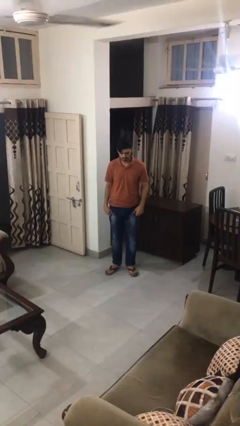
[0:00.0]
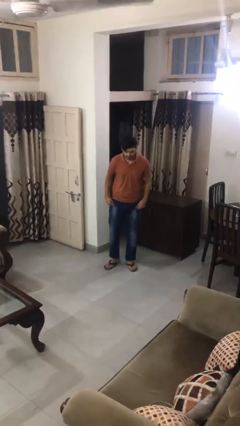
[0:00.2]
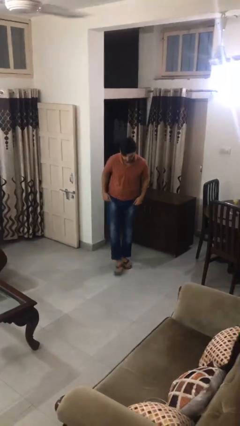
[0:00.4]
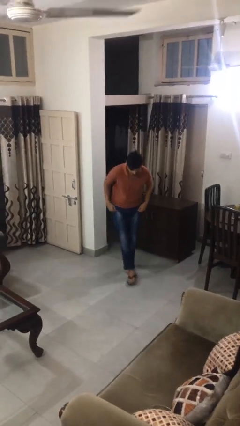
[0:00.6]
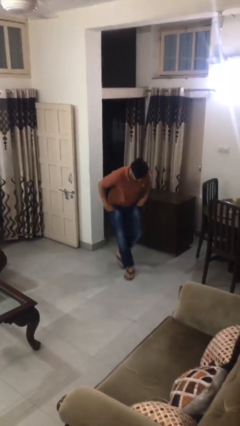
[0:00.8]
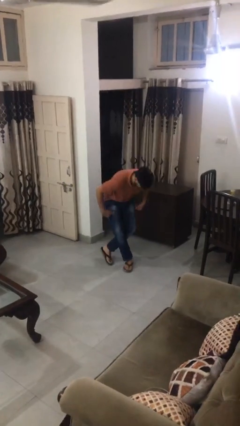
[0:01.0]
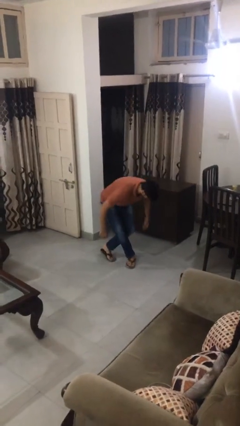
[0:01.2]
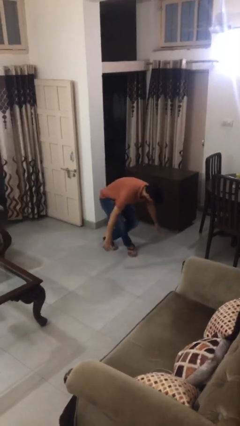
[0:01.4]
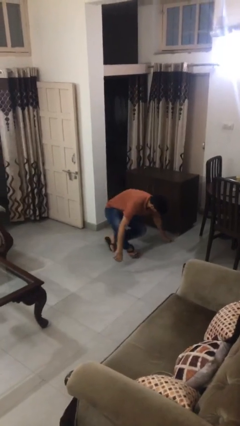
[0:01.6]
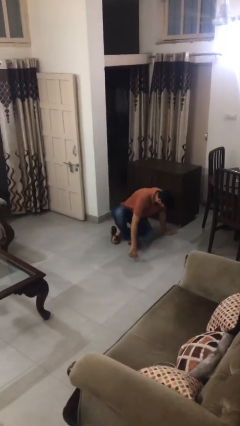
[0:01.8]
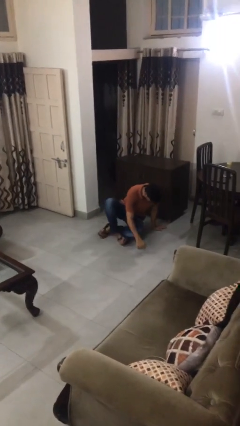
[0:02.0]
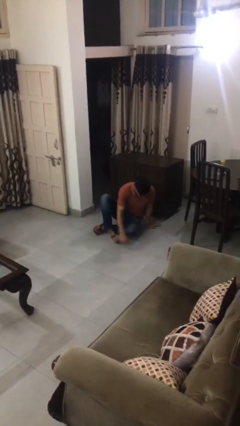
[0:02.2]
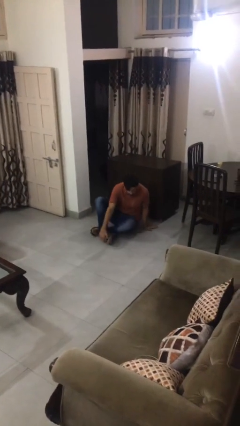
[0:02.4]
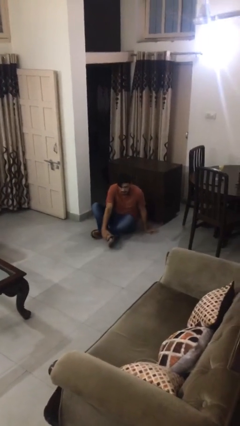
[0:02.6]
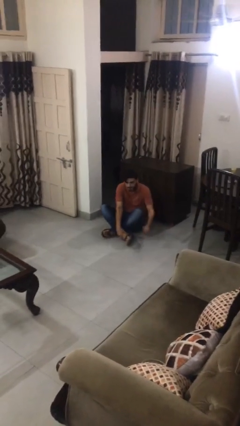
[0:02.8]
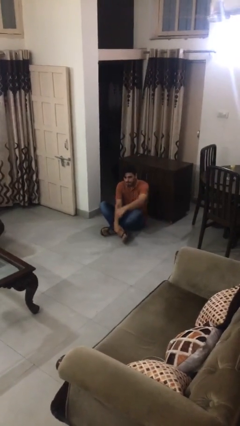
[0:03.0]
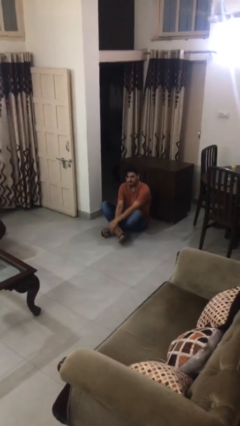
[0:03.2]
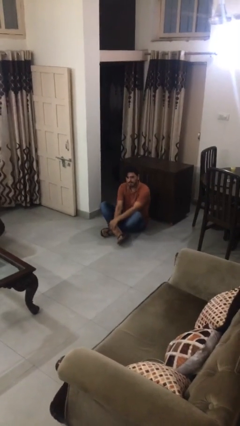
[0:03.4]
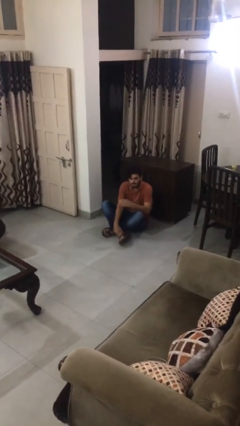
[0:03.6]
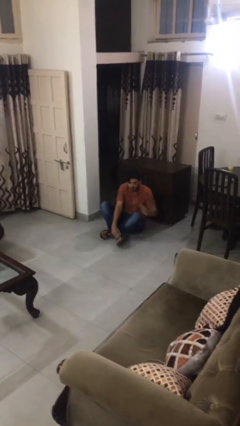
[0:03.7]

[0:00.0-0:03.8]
person sits crisscross

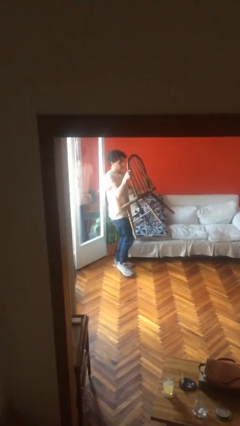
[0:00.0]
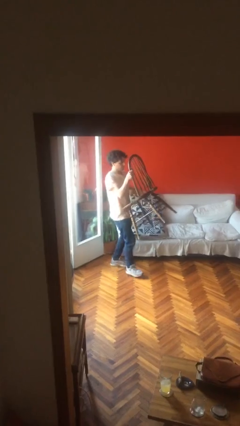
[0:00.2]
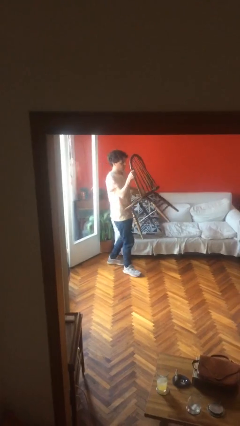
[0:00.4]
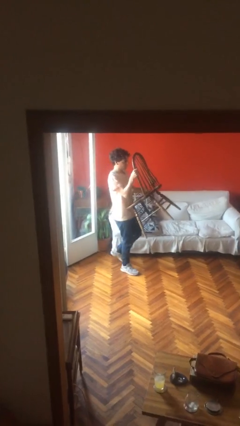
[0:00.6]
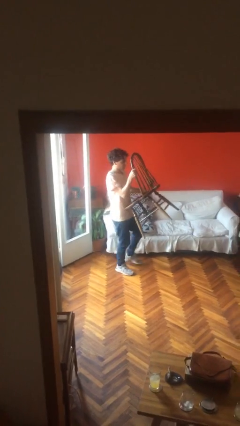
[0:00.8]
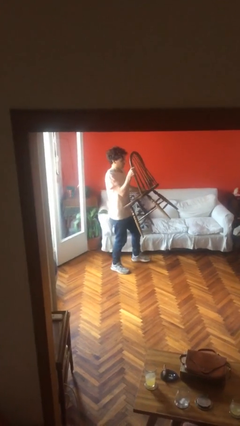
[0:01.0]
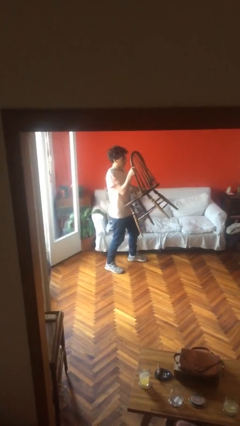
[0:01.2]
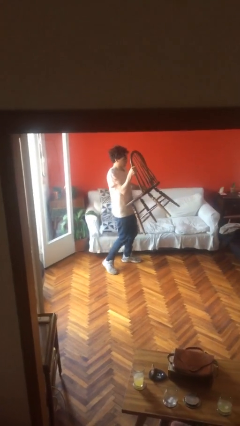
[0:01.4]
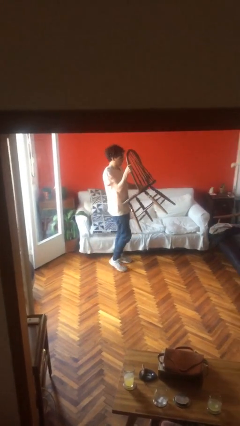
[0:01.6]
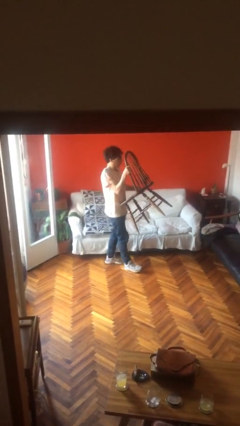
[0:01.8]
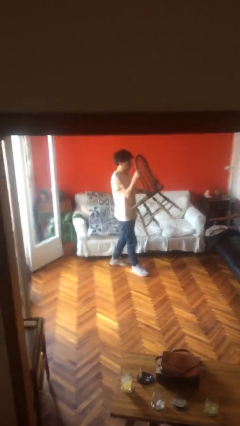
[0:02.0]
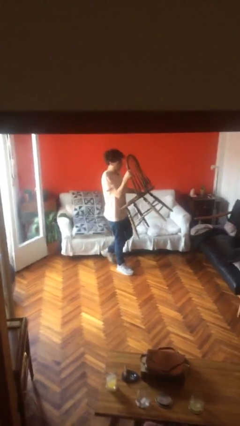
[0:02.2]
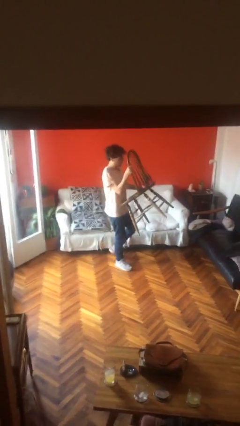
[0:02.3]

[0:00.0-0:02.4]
person carries heavy object

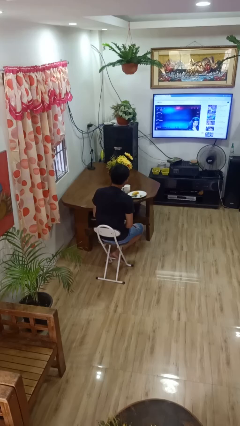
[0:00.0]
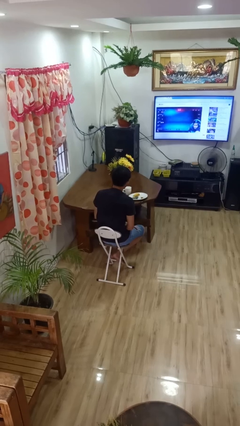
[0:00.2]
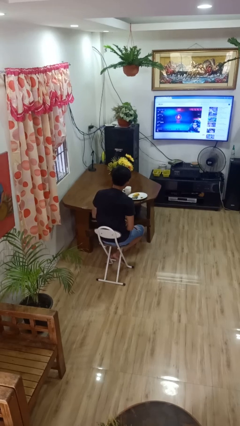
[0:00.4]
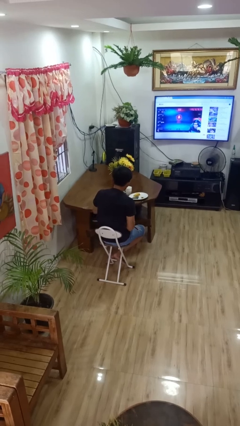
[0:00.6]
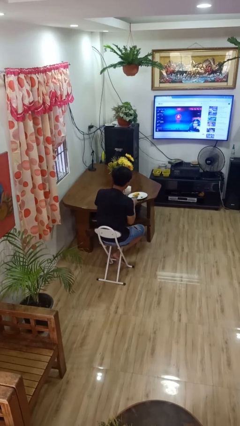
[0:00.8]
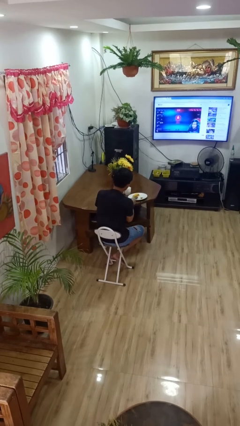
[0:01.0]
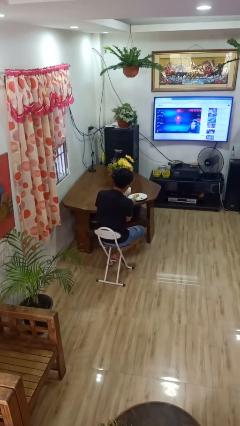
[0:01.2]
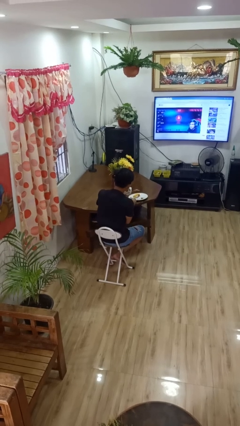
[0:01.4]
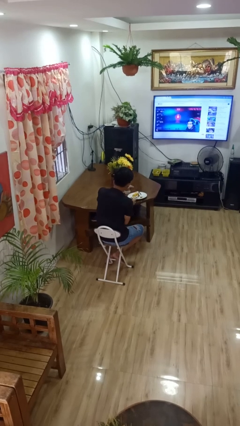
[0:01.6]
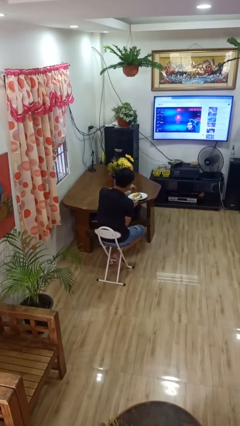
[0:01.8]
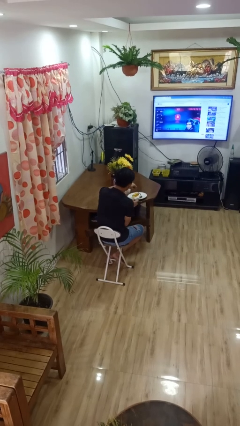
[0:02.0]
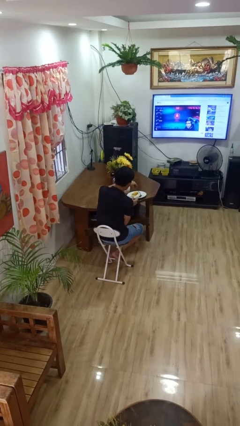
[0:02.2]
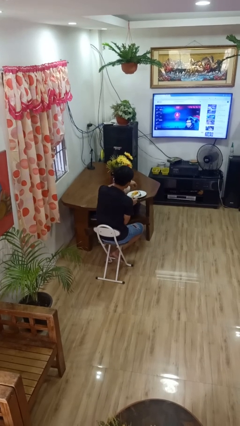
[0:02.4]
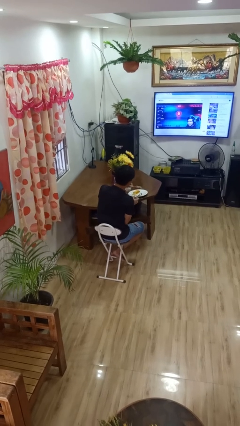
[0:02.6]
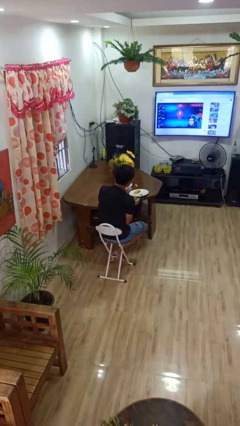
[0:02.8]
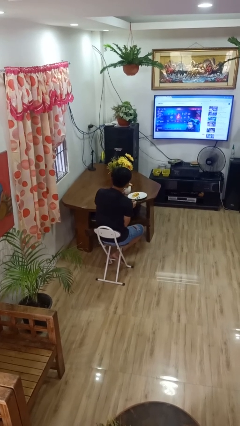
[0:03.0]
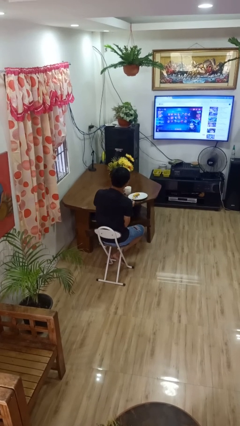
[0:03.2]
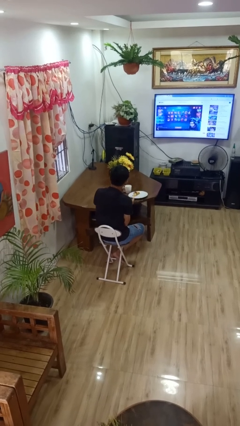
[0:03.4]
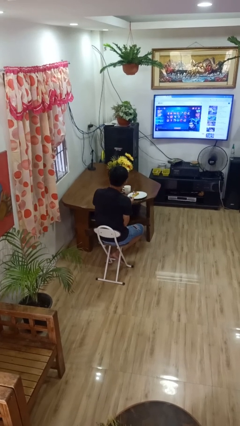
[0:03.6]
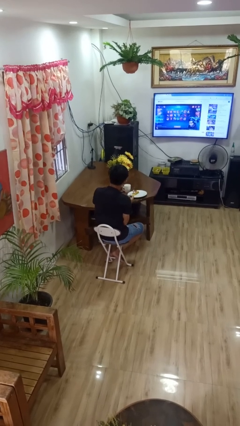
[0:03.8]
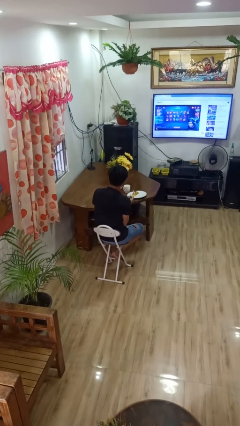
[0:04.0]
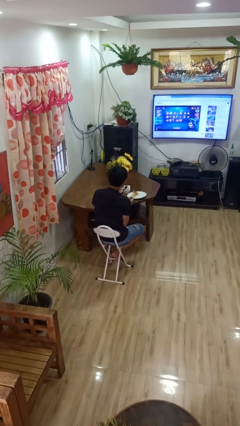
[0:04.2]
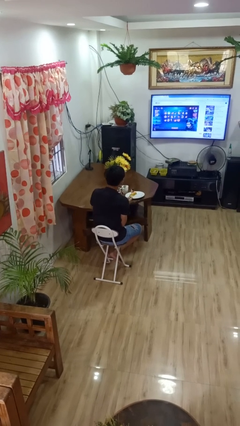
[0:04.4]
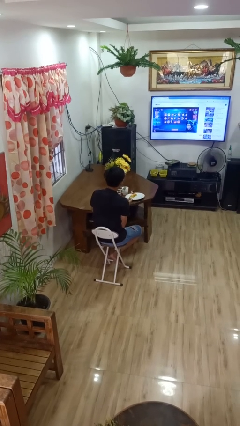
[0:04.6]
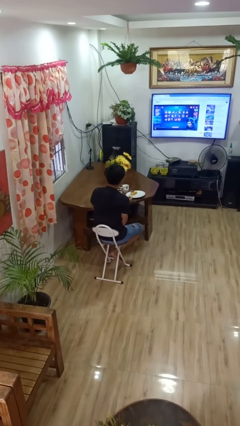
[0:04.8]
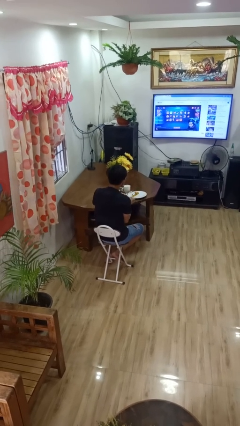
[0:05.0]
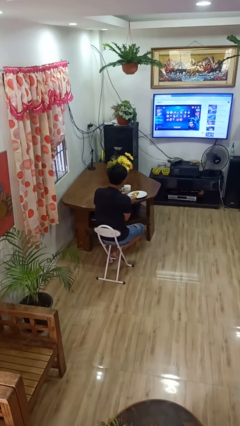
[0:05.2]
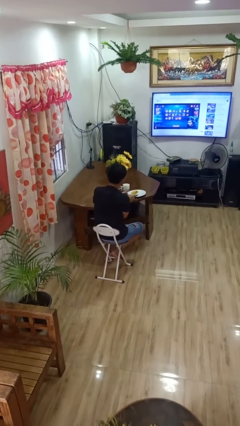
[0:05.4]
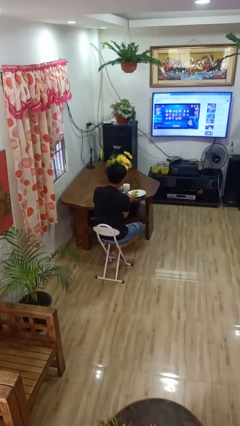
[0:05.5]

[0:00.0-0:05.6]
person eats with utensil

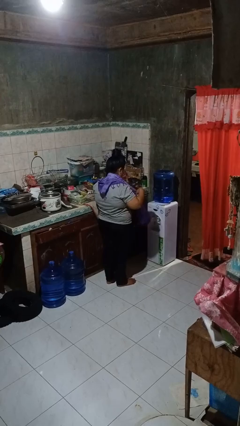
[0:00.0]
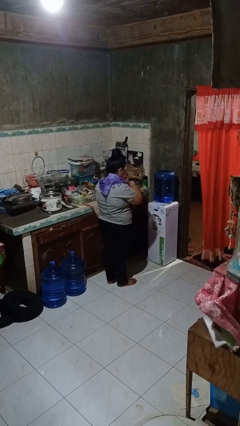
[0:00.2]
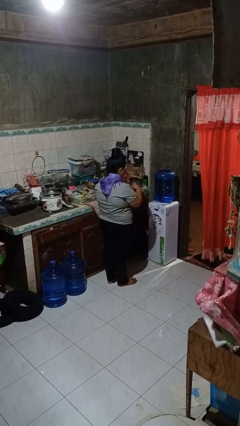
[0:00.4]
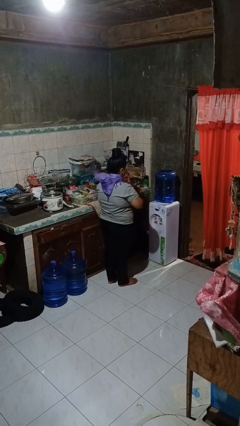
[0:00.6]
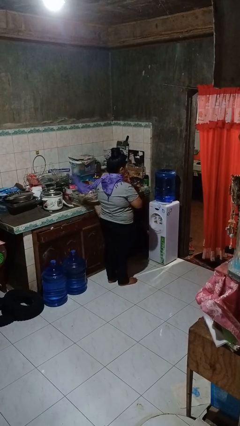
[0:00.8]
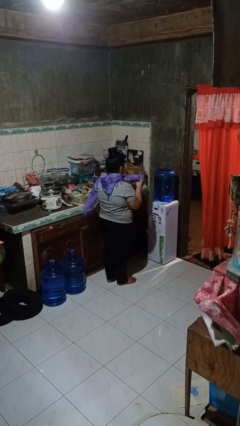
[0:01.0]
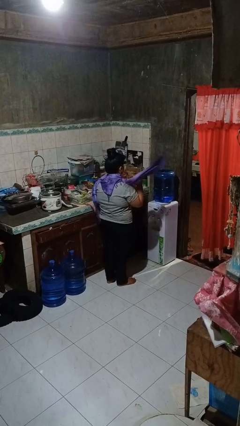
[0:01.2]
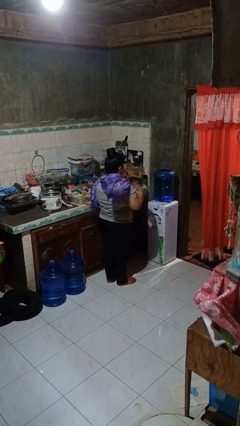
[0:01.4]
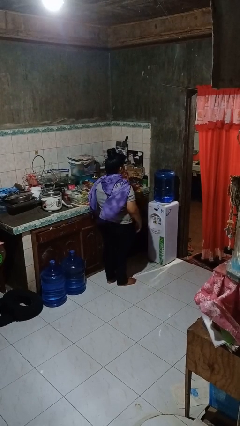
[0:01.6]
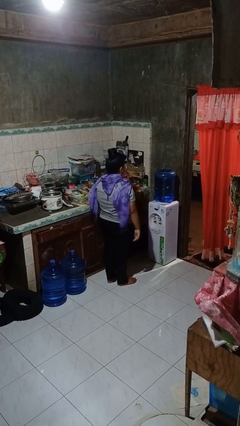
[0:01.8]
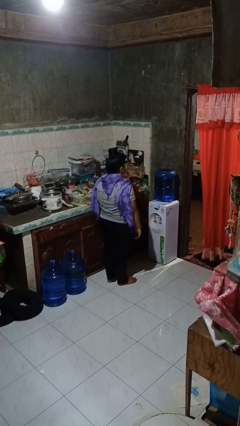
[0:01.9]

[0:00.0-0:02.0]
person puts on scarf

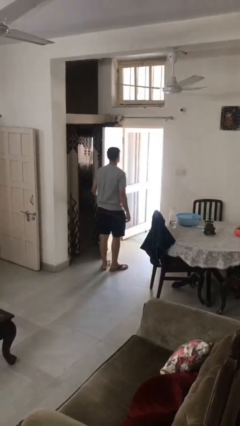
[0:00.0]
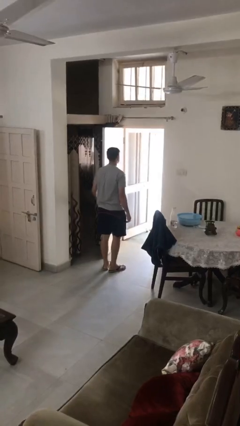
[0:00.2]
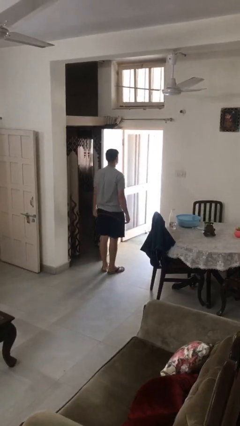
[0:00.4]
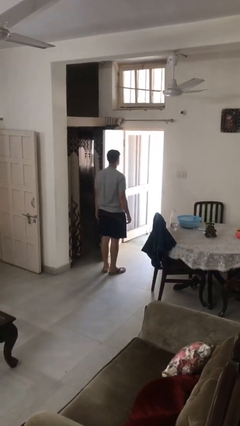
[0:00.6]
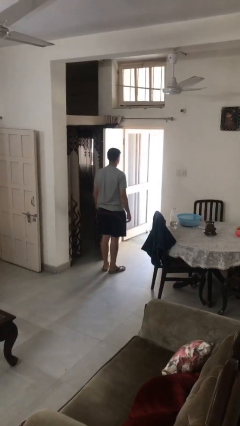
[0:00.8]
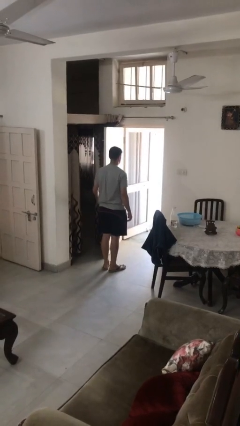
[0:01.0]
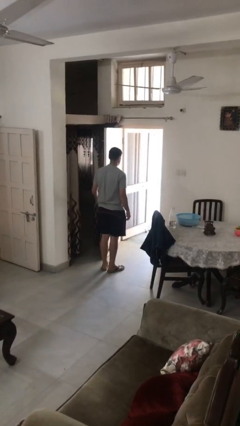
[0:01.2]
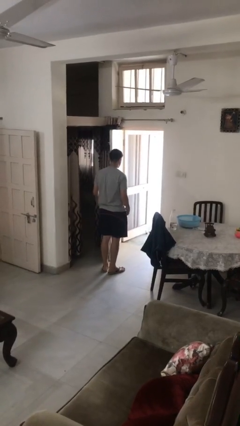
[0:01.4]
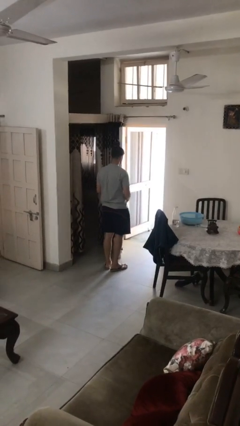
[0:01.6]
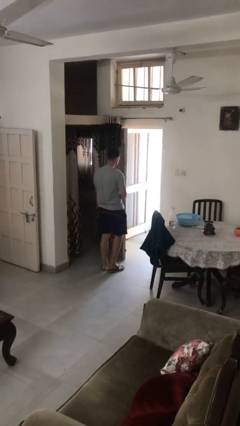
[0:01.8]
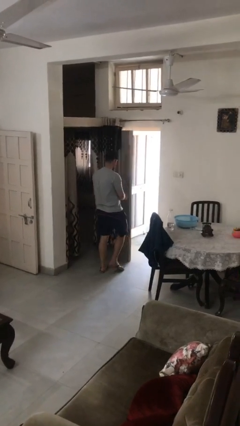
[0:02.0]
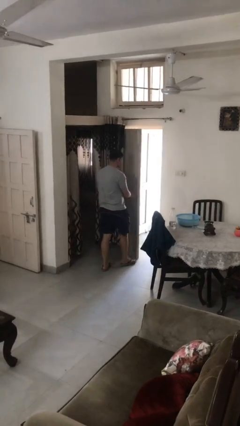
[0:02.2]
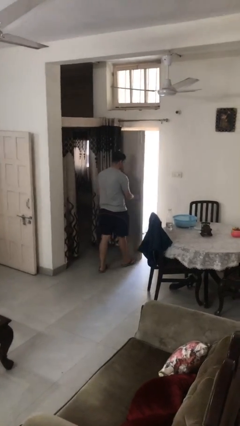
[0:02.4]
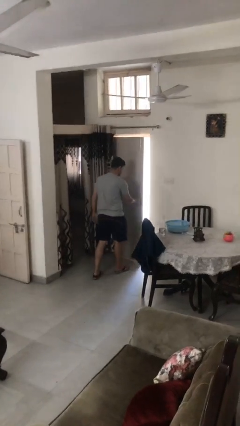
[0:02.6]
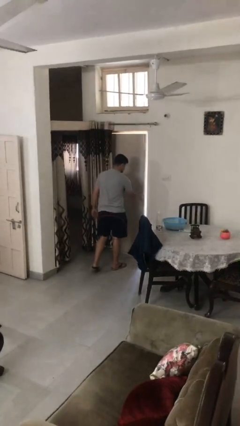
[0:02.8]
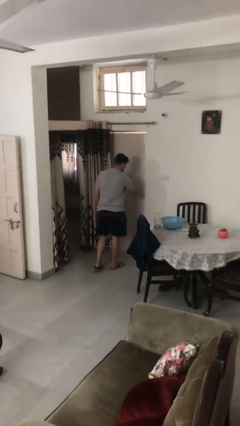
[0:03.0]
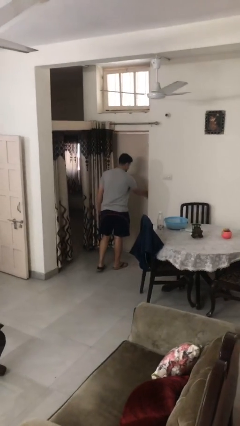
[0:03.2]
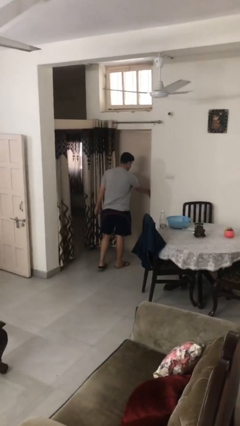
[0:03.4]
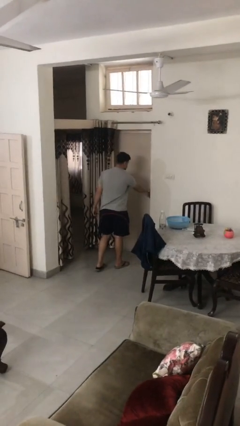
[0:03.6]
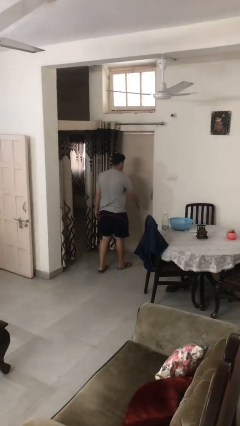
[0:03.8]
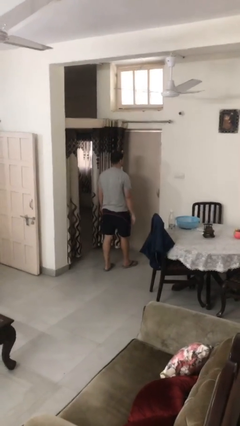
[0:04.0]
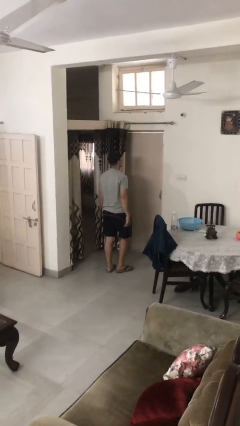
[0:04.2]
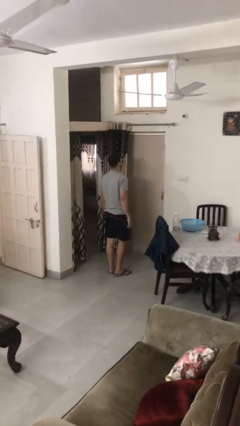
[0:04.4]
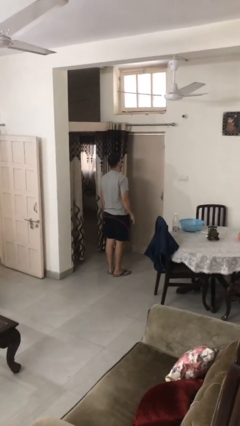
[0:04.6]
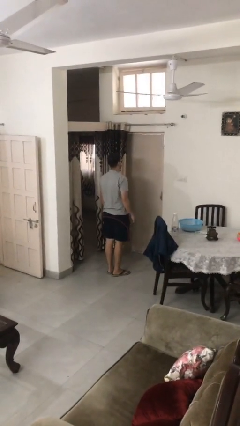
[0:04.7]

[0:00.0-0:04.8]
person closes facility door
